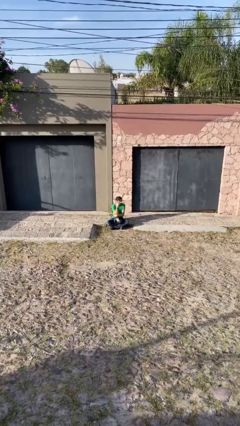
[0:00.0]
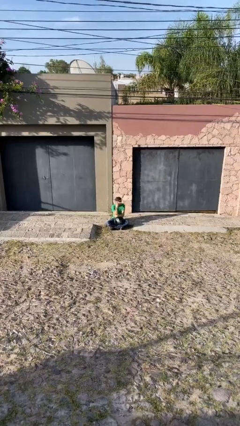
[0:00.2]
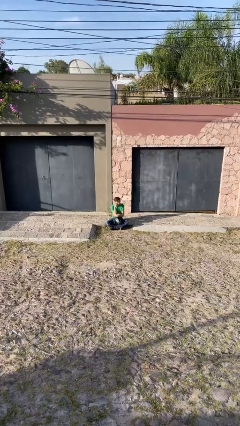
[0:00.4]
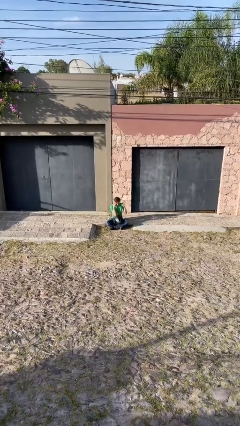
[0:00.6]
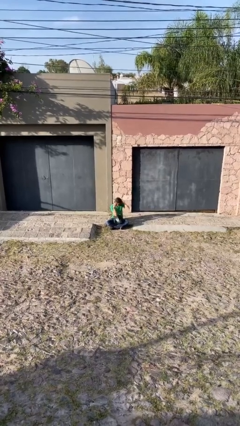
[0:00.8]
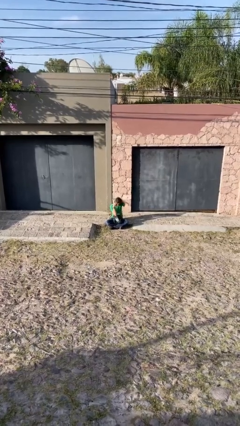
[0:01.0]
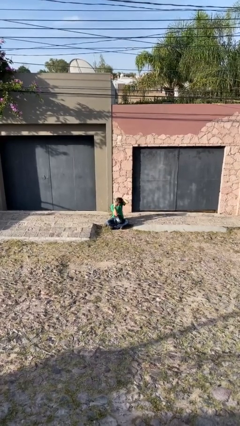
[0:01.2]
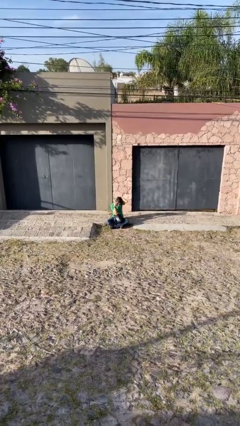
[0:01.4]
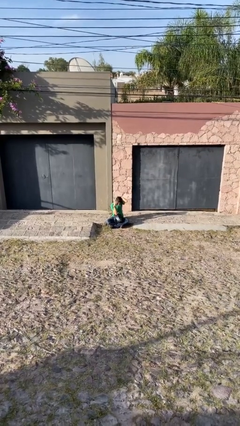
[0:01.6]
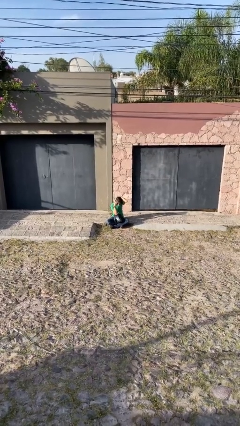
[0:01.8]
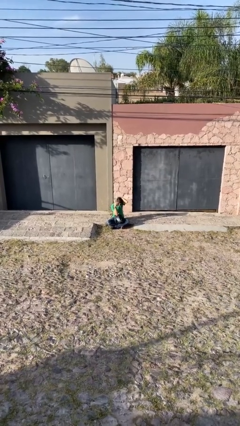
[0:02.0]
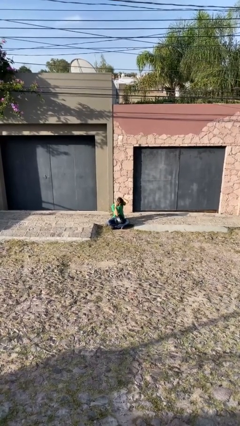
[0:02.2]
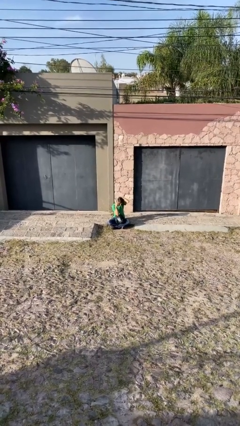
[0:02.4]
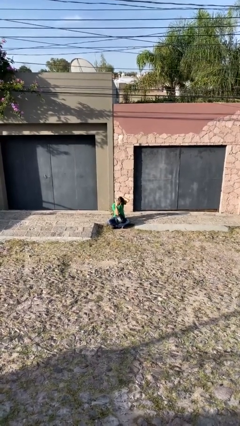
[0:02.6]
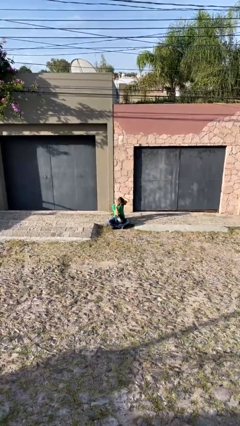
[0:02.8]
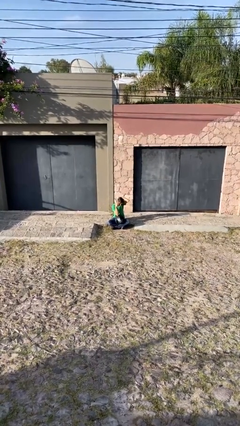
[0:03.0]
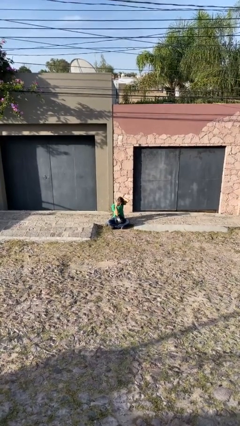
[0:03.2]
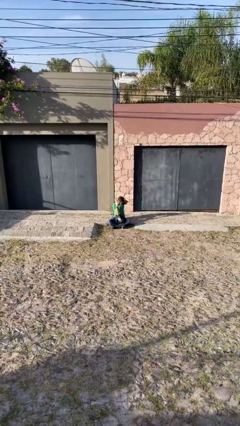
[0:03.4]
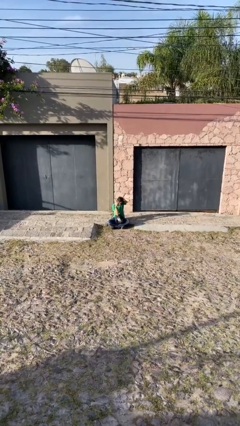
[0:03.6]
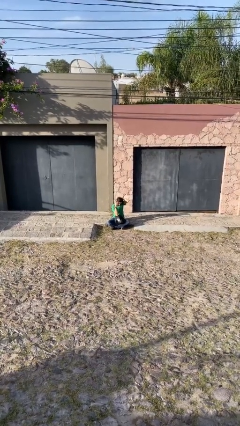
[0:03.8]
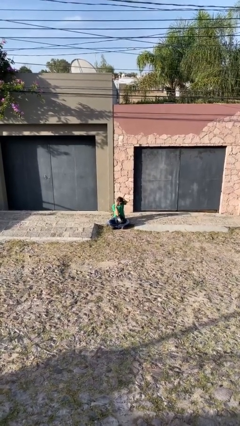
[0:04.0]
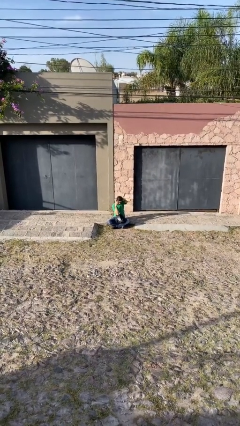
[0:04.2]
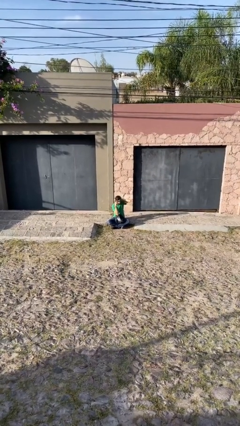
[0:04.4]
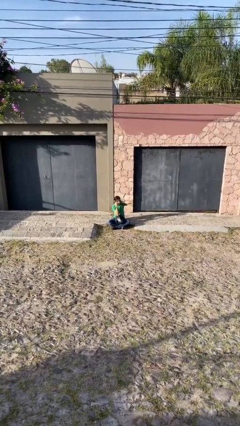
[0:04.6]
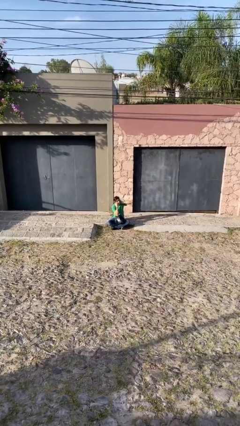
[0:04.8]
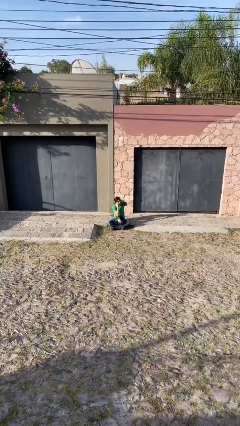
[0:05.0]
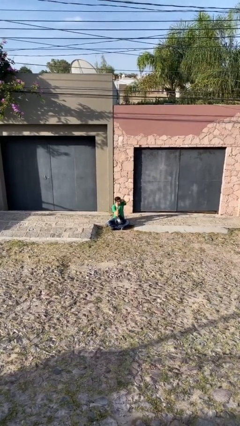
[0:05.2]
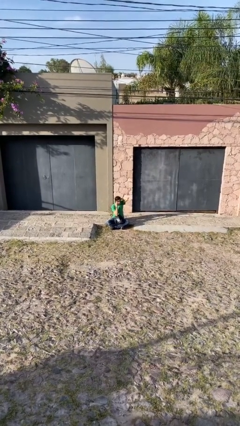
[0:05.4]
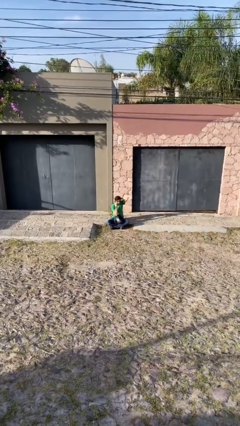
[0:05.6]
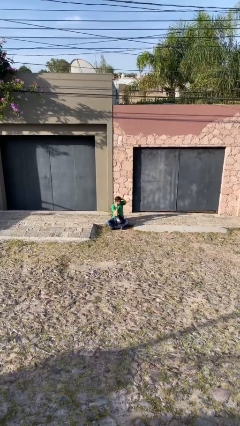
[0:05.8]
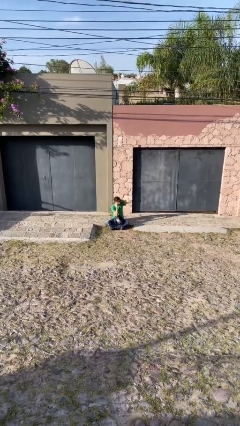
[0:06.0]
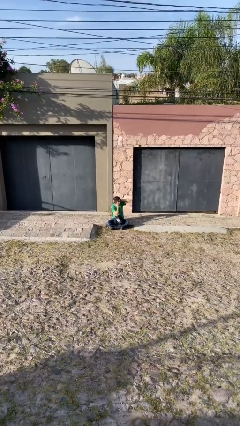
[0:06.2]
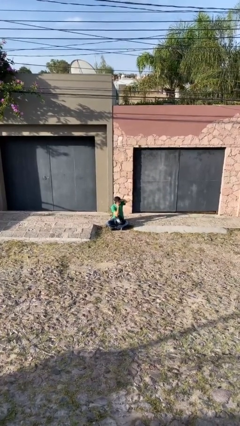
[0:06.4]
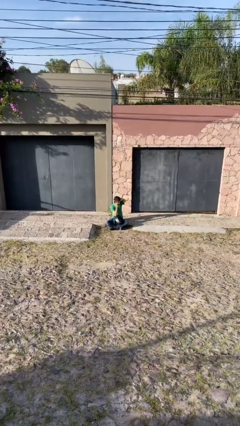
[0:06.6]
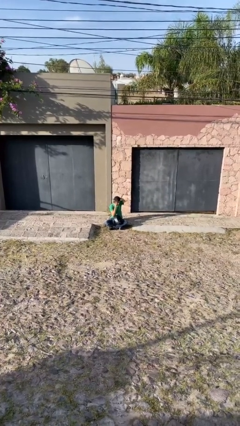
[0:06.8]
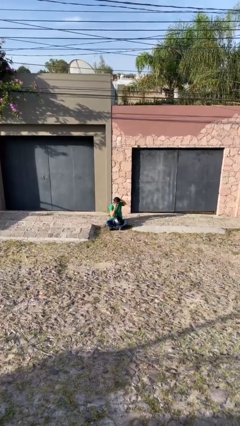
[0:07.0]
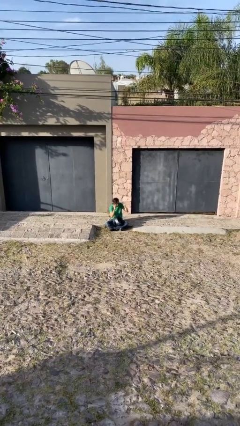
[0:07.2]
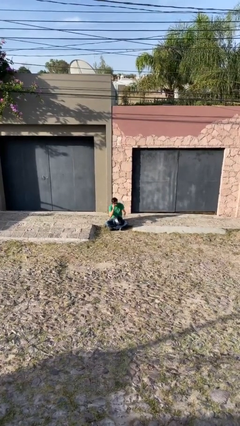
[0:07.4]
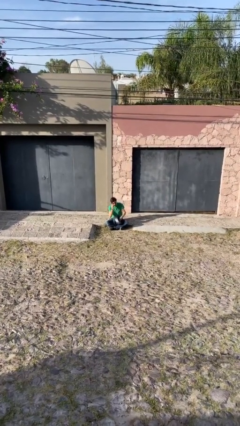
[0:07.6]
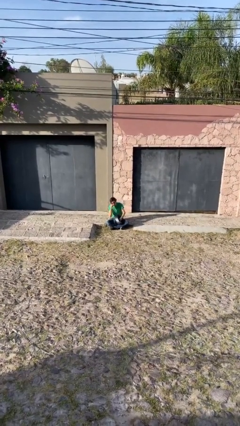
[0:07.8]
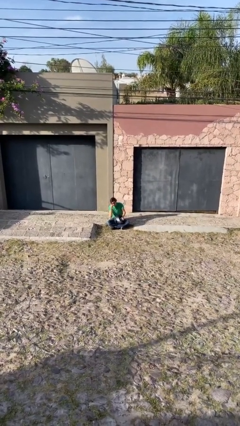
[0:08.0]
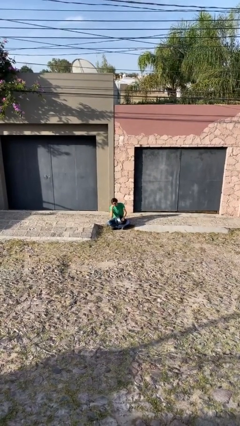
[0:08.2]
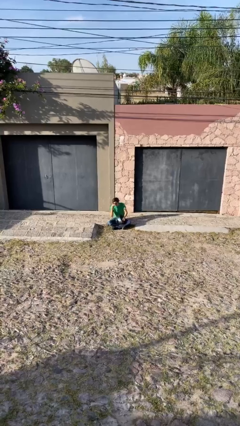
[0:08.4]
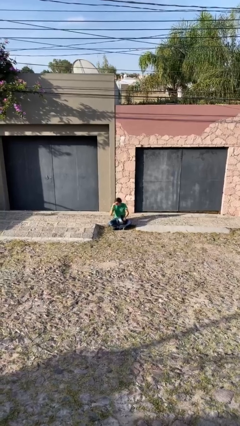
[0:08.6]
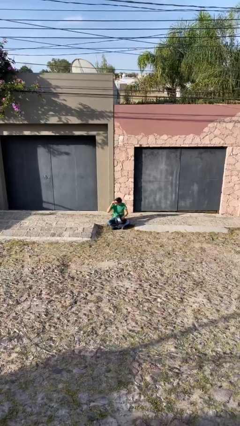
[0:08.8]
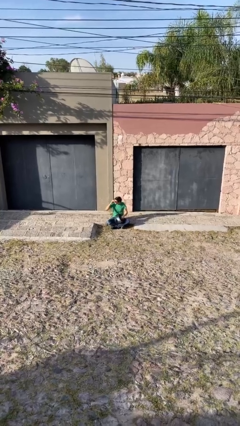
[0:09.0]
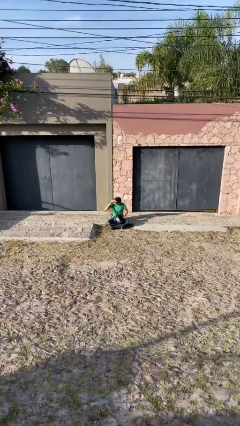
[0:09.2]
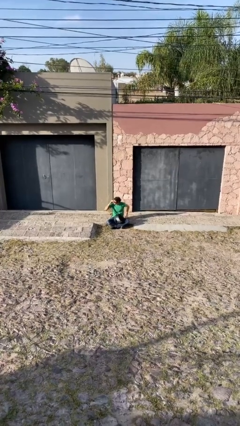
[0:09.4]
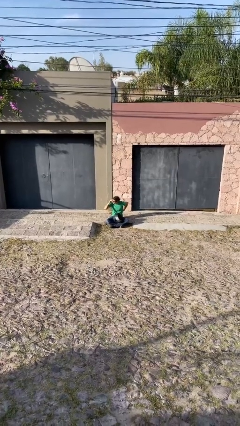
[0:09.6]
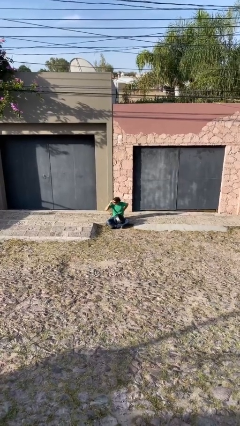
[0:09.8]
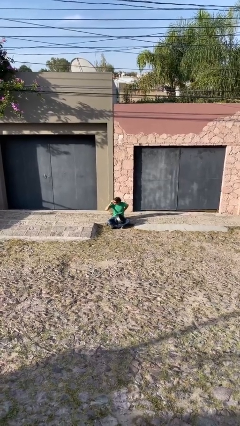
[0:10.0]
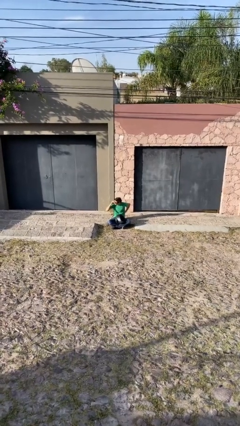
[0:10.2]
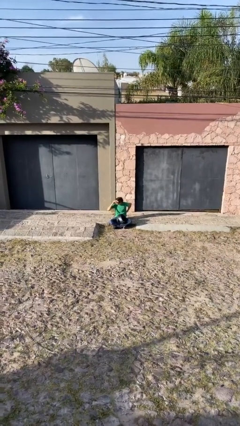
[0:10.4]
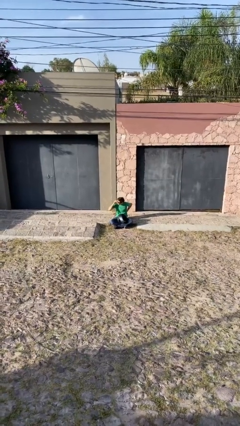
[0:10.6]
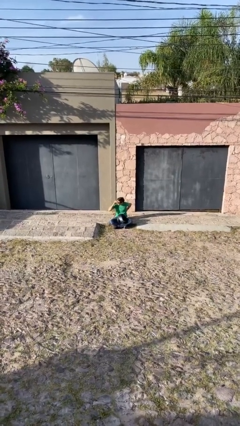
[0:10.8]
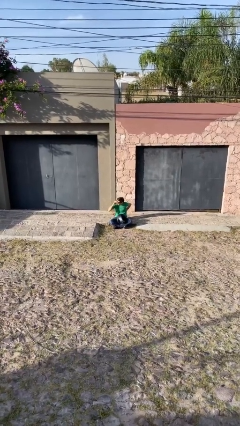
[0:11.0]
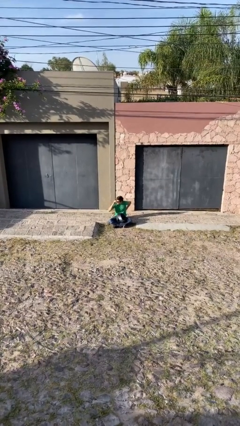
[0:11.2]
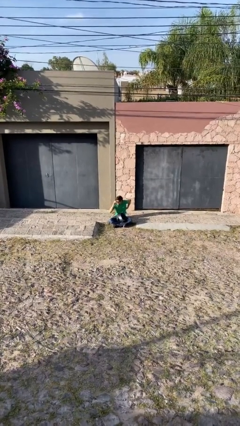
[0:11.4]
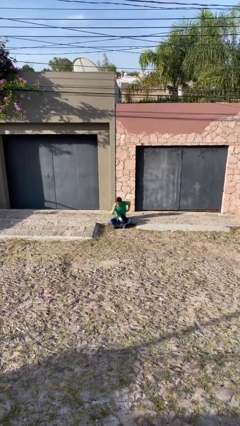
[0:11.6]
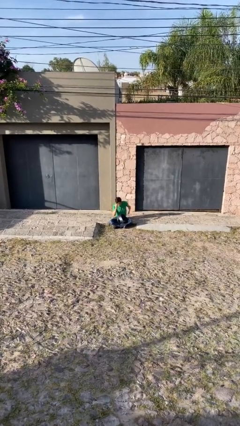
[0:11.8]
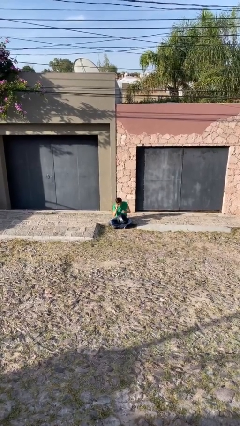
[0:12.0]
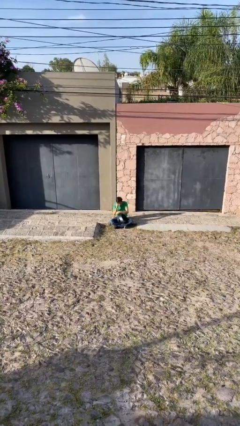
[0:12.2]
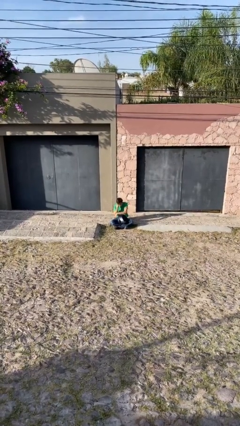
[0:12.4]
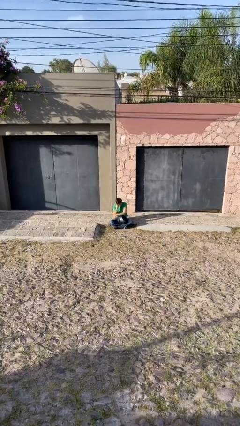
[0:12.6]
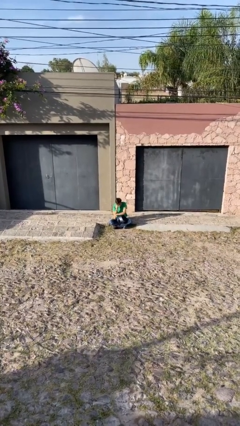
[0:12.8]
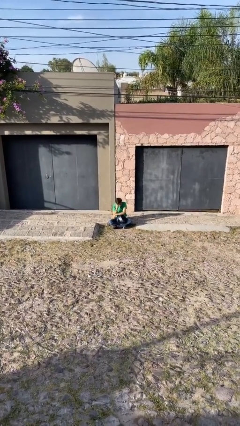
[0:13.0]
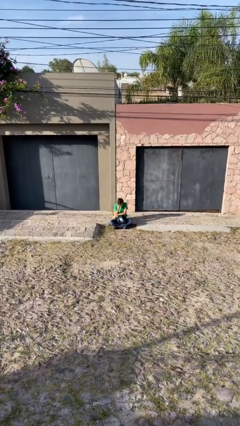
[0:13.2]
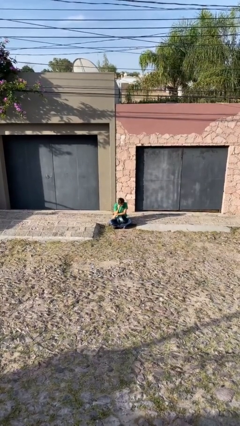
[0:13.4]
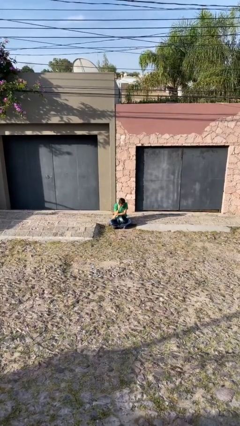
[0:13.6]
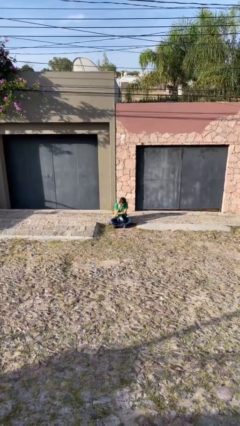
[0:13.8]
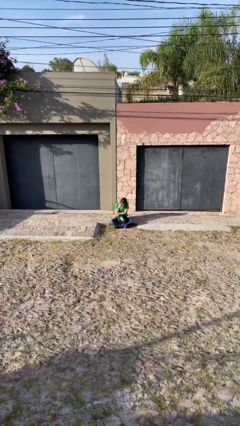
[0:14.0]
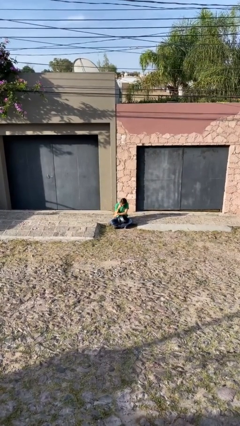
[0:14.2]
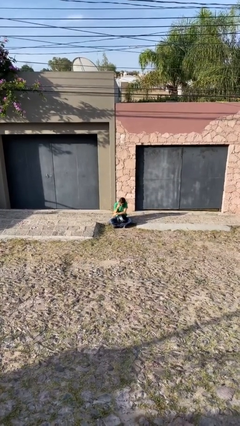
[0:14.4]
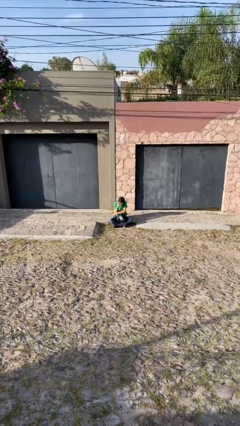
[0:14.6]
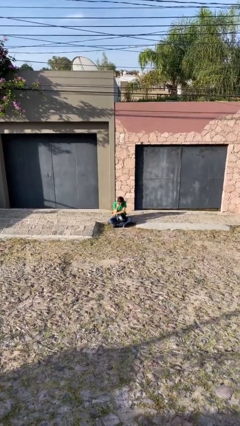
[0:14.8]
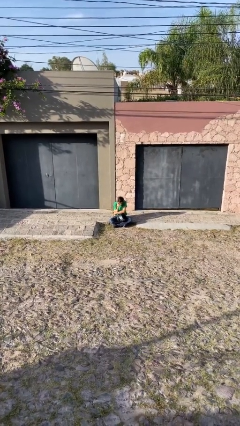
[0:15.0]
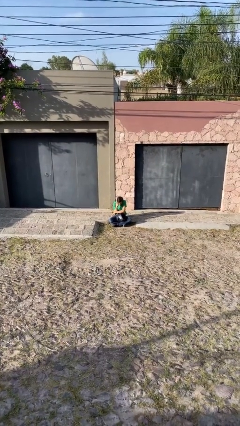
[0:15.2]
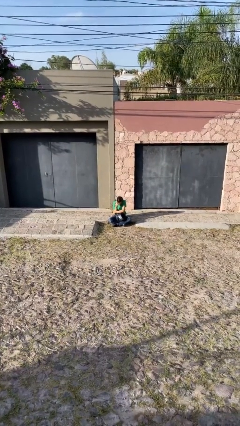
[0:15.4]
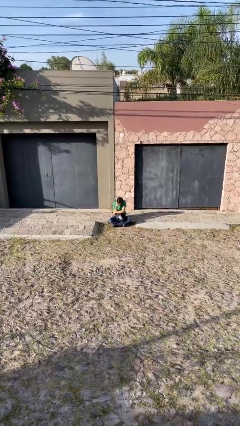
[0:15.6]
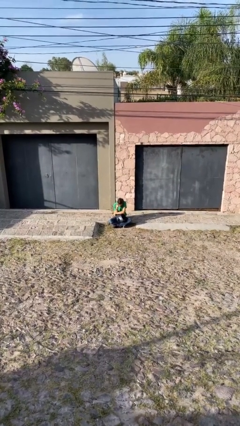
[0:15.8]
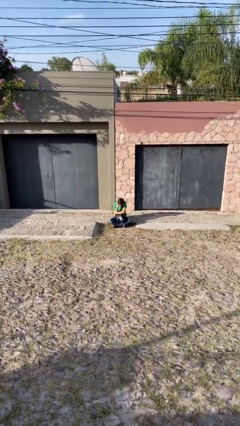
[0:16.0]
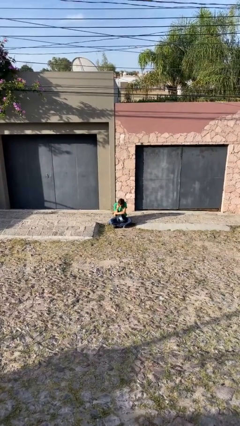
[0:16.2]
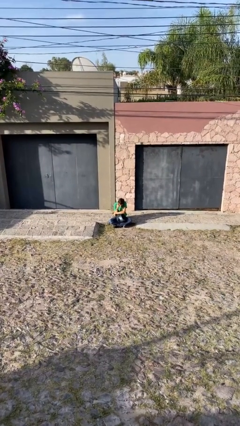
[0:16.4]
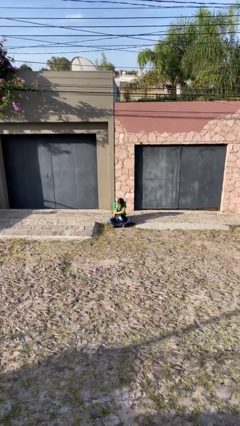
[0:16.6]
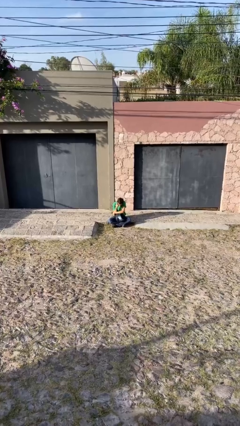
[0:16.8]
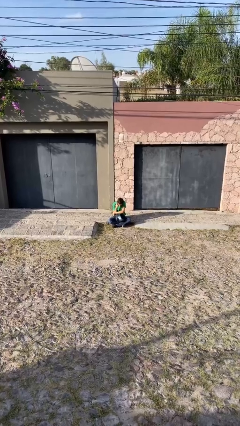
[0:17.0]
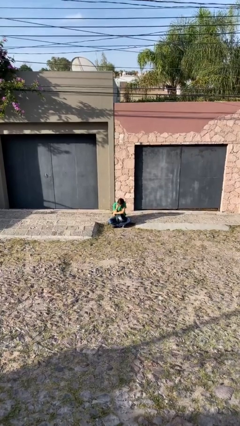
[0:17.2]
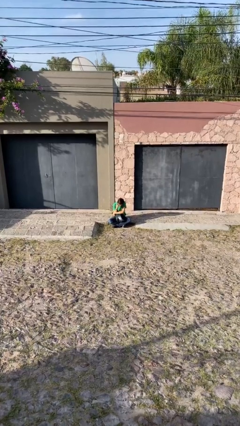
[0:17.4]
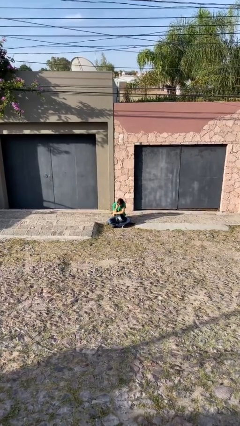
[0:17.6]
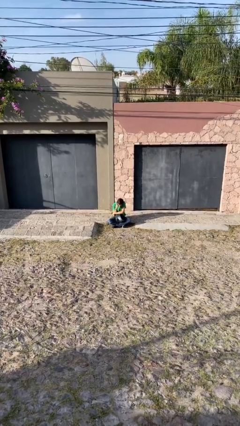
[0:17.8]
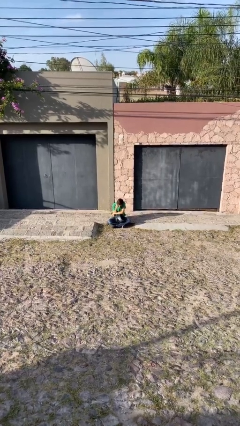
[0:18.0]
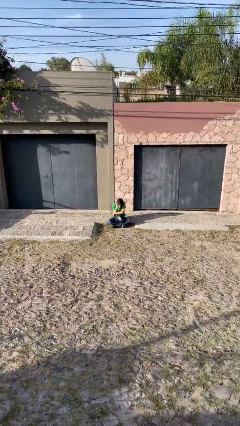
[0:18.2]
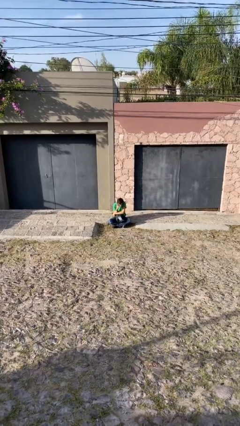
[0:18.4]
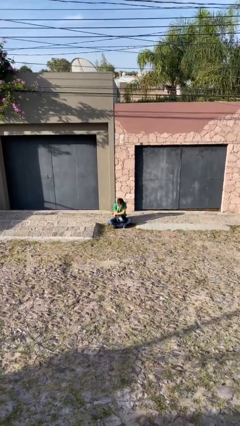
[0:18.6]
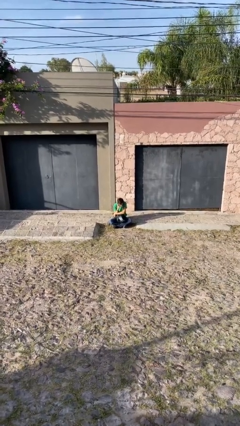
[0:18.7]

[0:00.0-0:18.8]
person talks on phone
